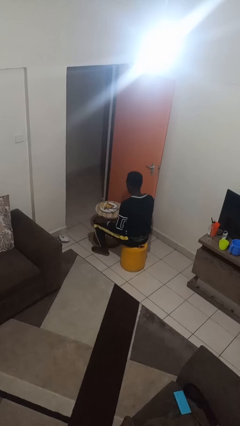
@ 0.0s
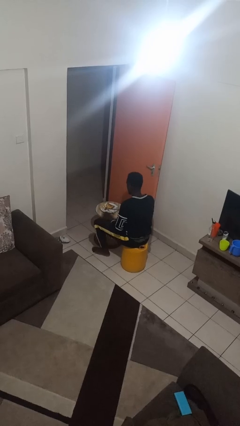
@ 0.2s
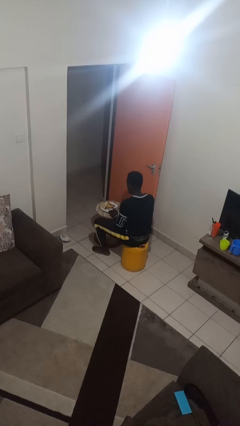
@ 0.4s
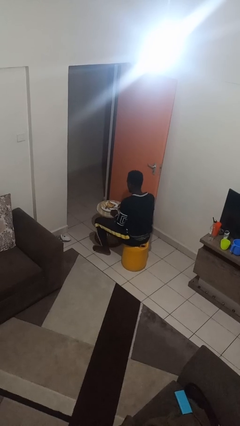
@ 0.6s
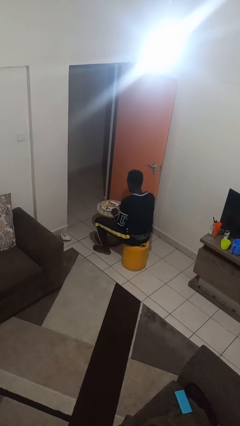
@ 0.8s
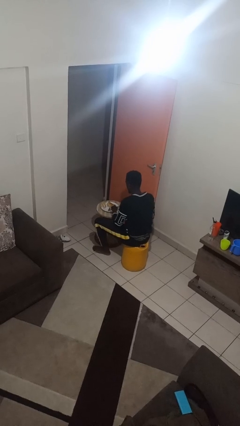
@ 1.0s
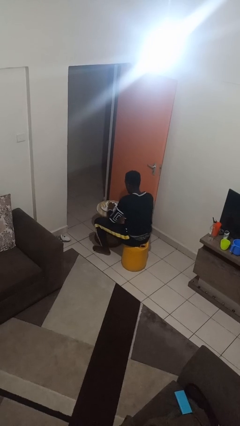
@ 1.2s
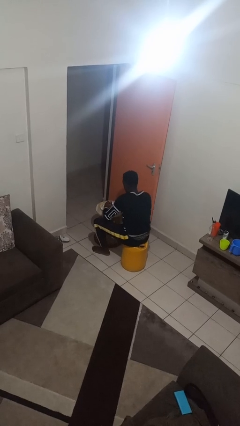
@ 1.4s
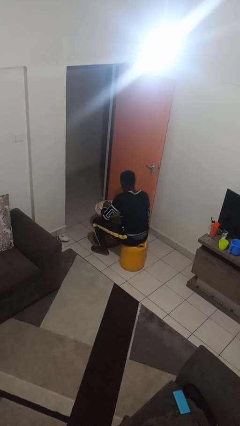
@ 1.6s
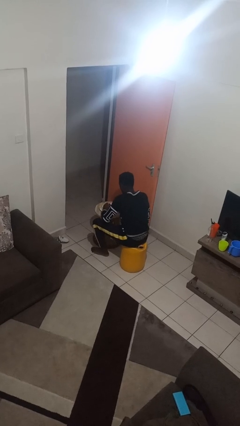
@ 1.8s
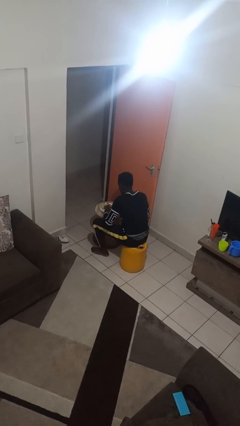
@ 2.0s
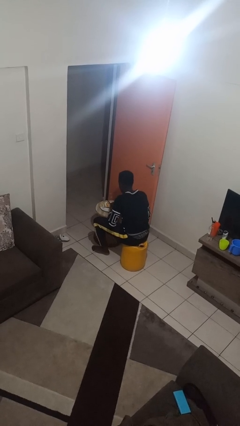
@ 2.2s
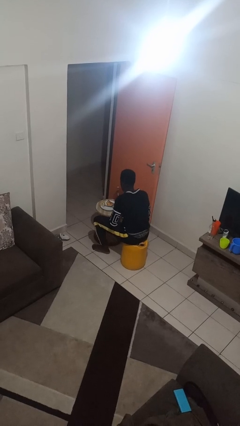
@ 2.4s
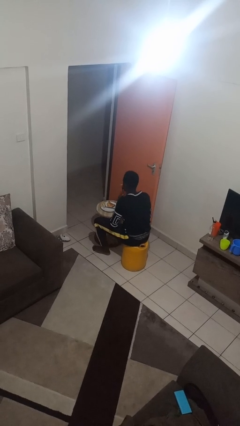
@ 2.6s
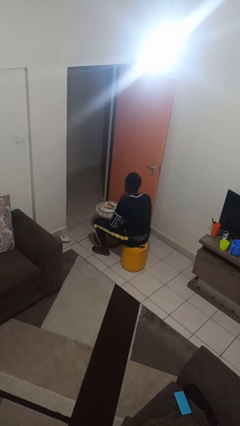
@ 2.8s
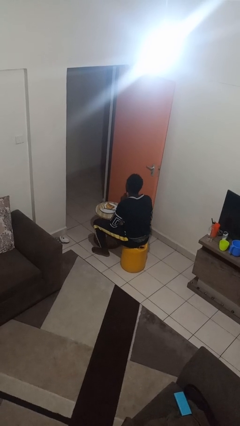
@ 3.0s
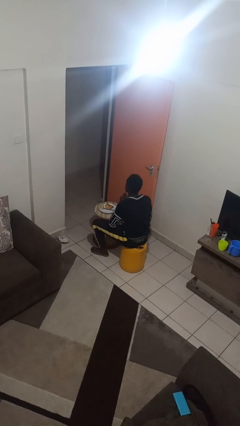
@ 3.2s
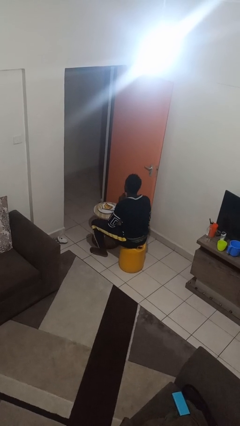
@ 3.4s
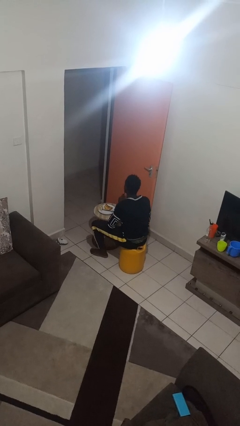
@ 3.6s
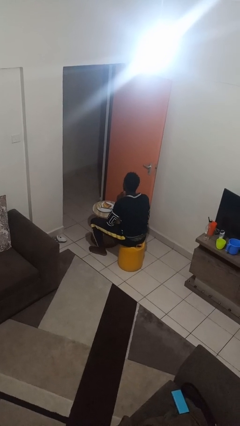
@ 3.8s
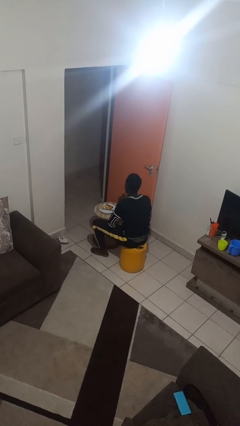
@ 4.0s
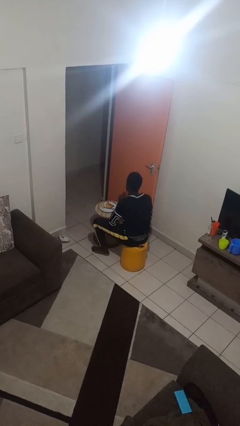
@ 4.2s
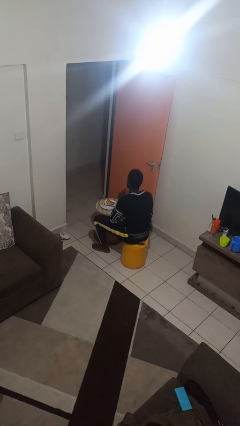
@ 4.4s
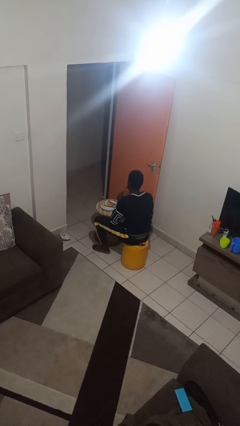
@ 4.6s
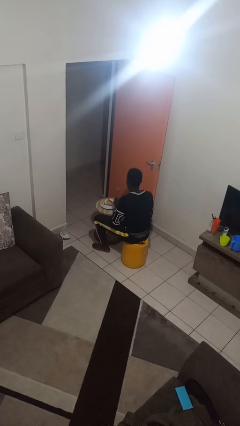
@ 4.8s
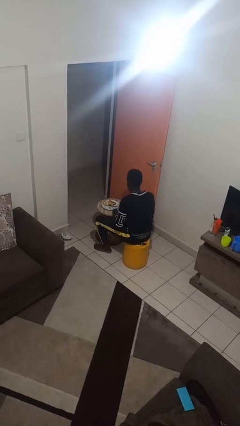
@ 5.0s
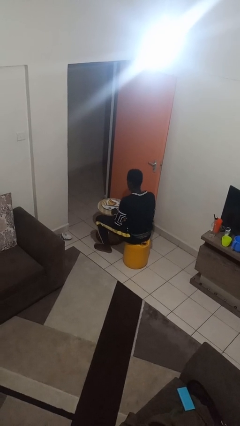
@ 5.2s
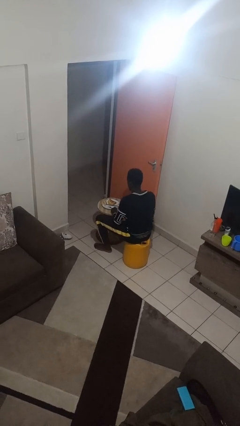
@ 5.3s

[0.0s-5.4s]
person eats with utensil

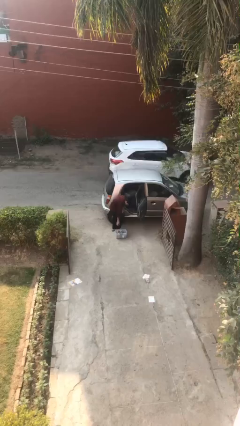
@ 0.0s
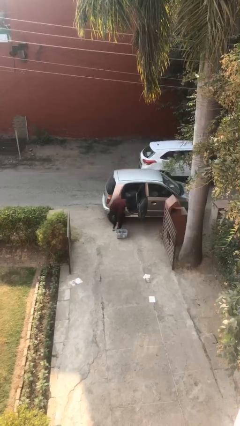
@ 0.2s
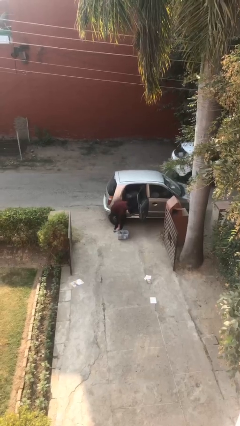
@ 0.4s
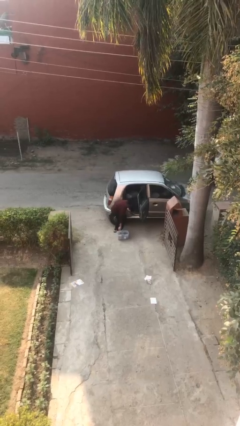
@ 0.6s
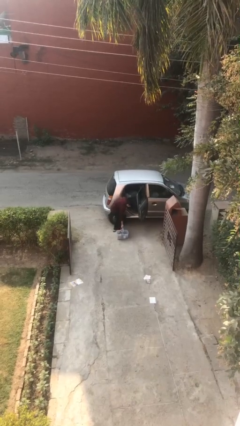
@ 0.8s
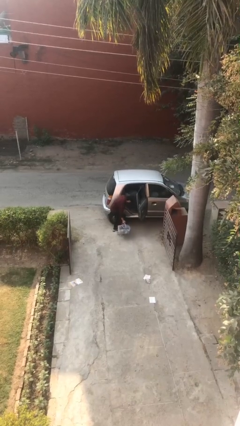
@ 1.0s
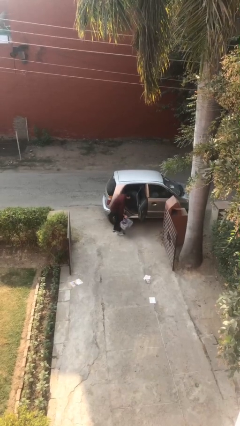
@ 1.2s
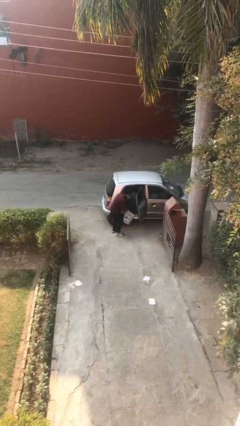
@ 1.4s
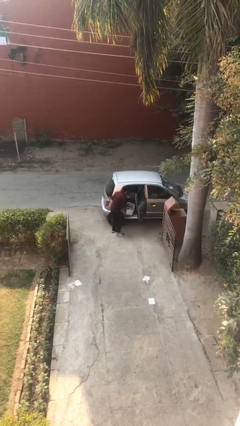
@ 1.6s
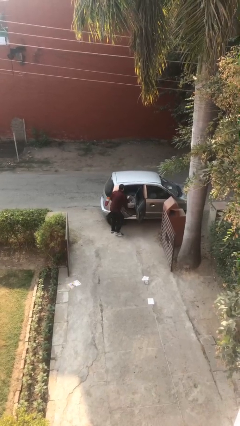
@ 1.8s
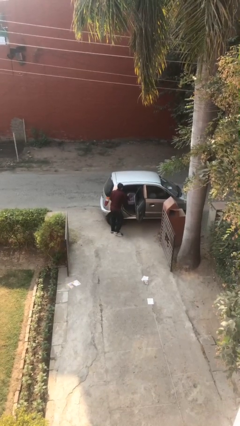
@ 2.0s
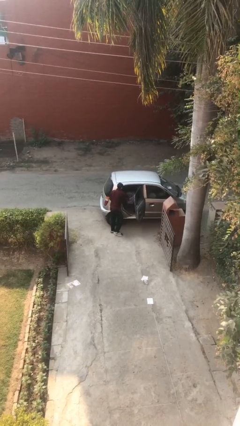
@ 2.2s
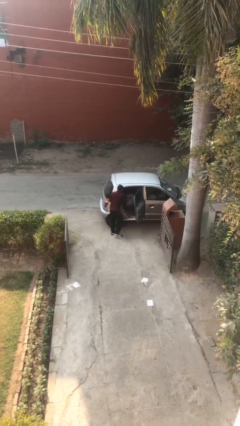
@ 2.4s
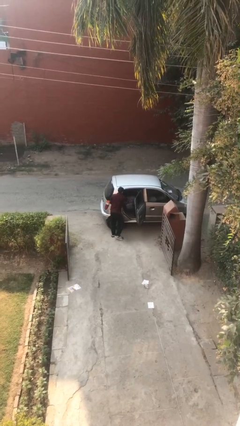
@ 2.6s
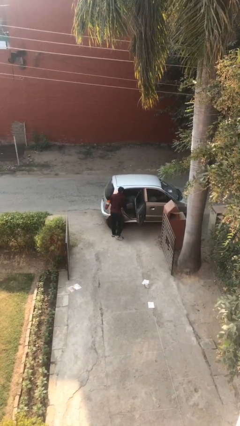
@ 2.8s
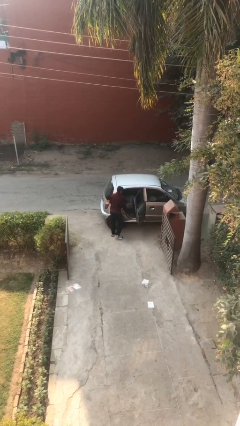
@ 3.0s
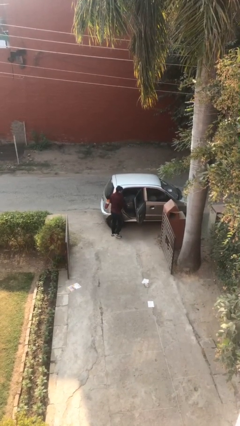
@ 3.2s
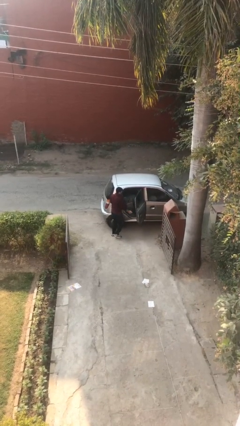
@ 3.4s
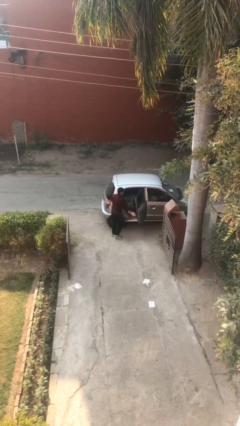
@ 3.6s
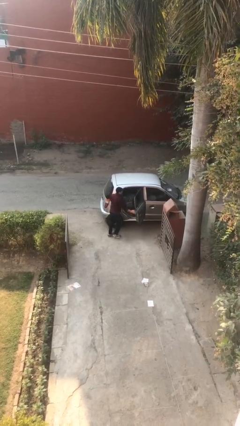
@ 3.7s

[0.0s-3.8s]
person loads car

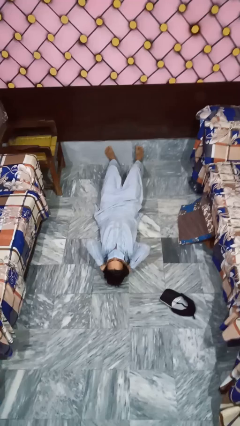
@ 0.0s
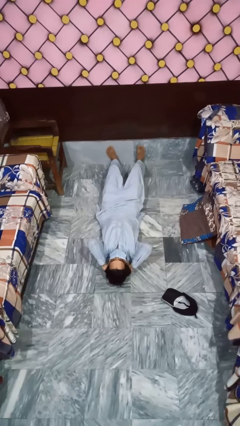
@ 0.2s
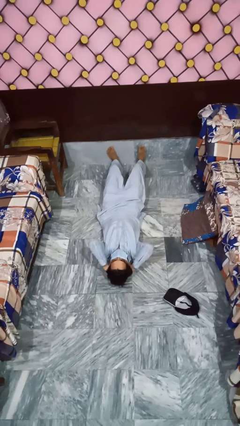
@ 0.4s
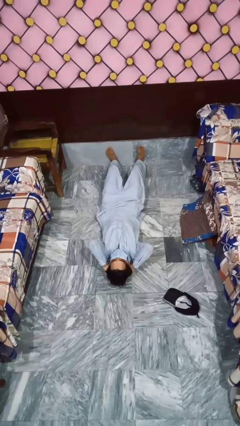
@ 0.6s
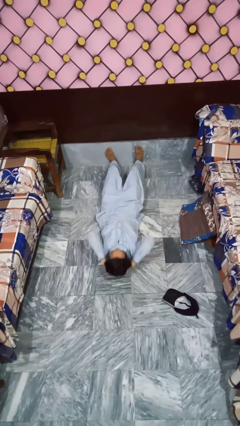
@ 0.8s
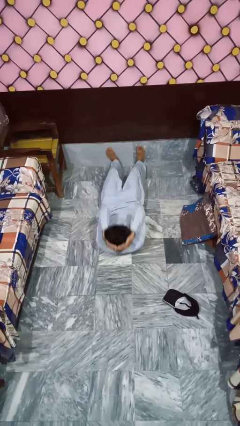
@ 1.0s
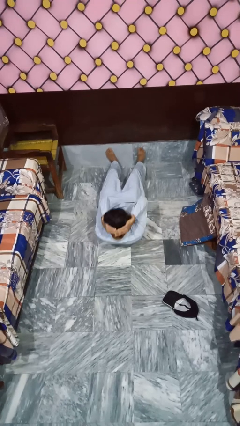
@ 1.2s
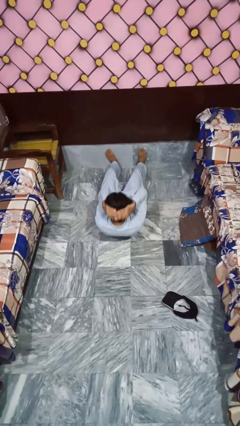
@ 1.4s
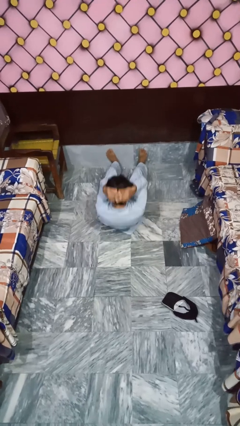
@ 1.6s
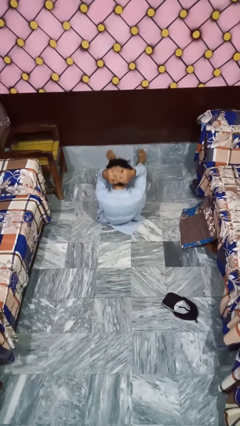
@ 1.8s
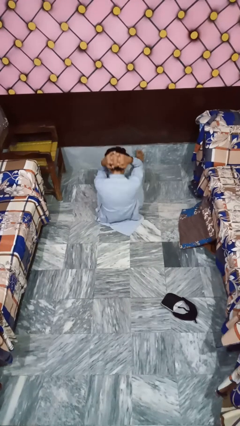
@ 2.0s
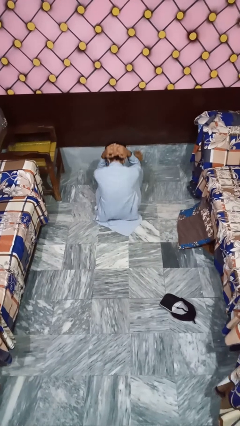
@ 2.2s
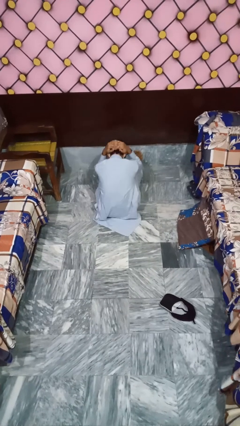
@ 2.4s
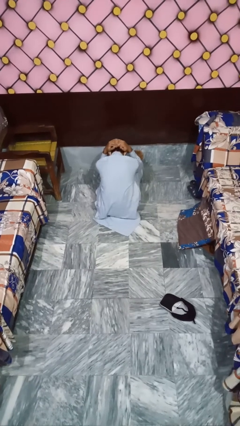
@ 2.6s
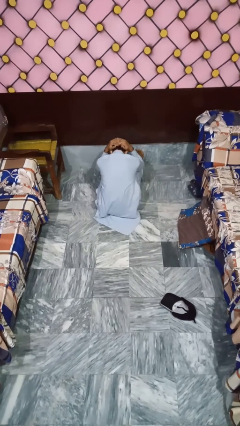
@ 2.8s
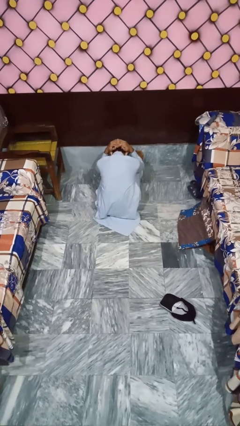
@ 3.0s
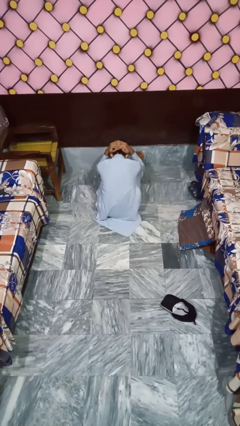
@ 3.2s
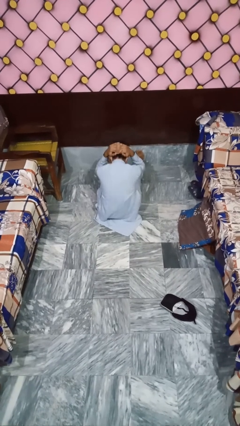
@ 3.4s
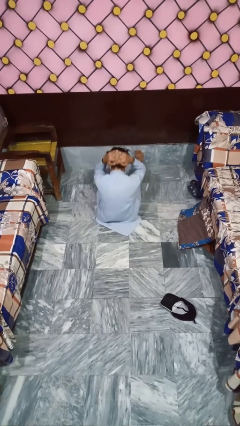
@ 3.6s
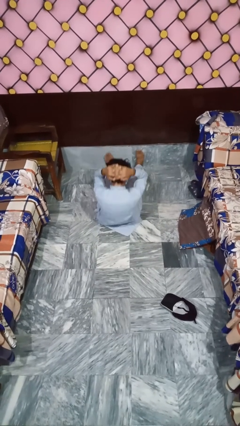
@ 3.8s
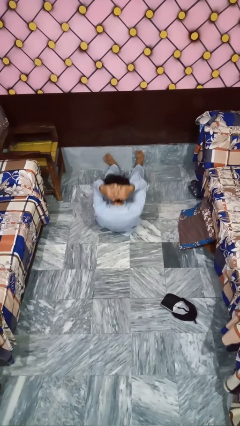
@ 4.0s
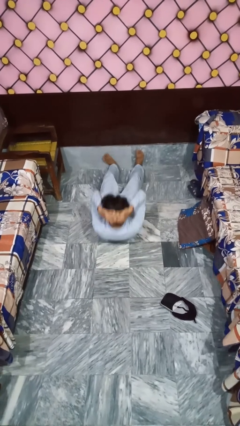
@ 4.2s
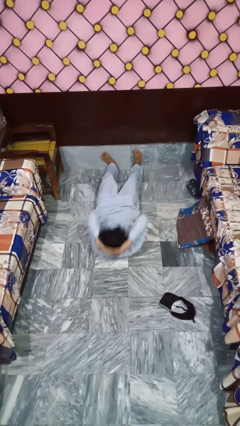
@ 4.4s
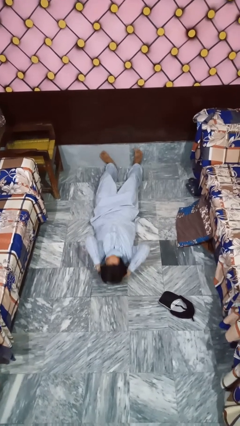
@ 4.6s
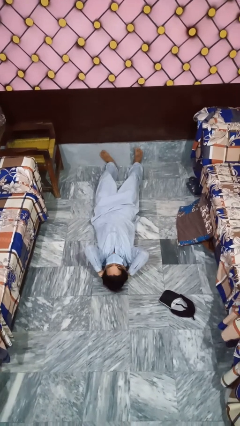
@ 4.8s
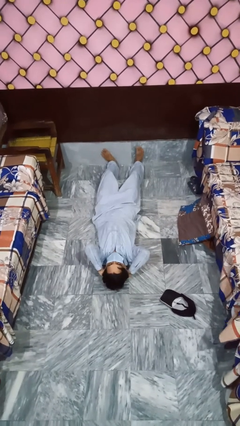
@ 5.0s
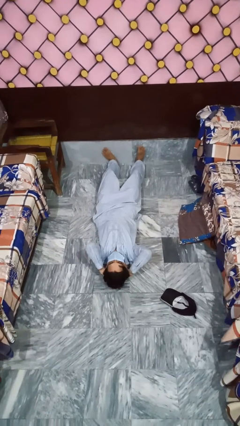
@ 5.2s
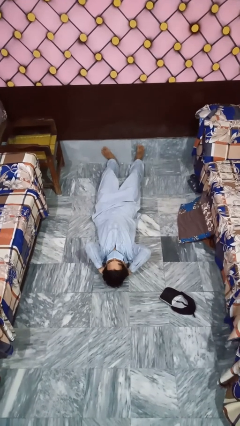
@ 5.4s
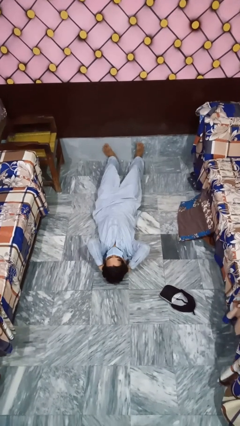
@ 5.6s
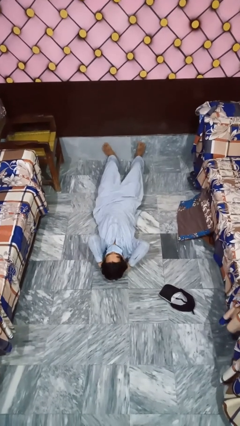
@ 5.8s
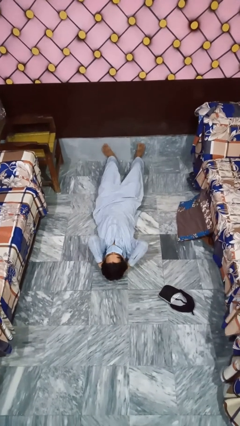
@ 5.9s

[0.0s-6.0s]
person exercises with situp

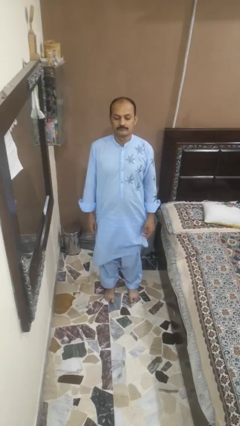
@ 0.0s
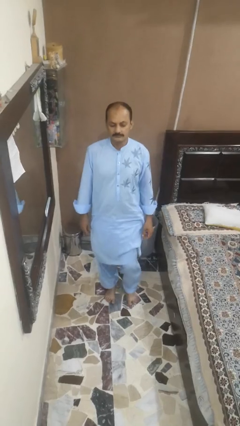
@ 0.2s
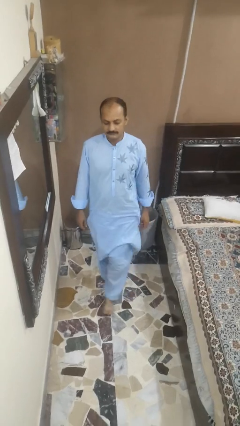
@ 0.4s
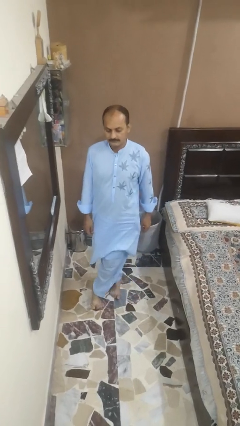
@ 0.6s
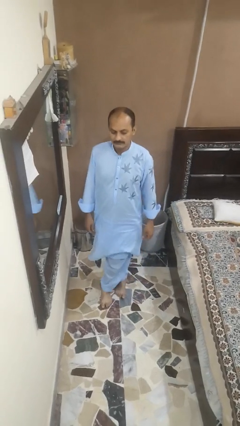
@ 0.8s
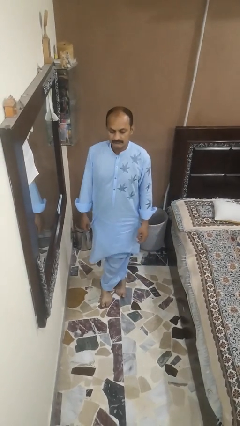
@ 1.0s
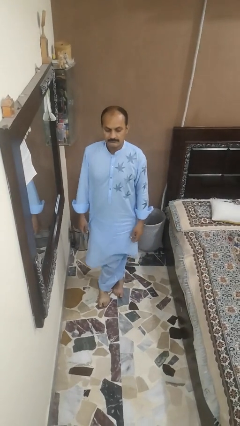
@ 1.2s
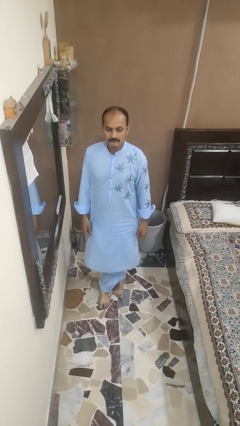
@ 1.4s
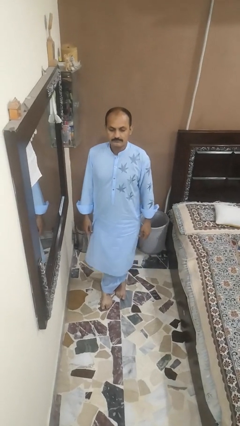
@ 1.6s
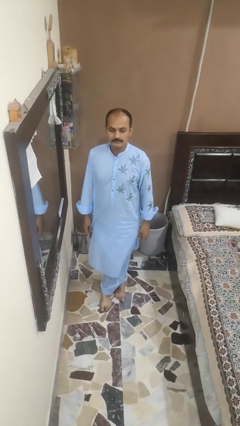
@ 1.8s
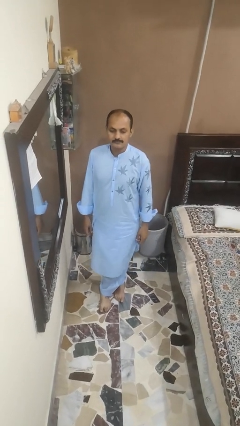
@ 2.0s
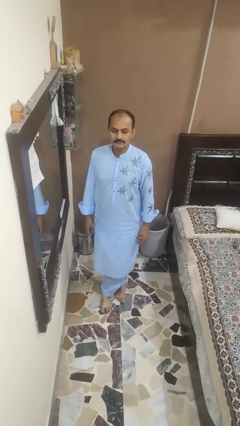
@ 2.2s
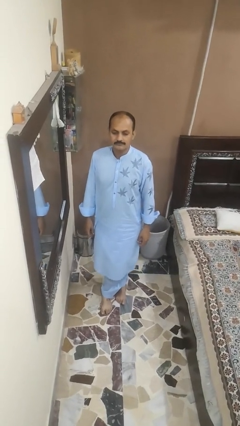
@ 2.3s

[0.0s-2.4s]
person crosses legs
